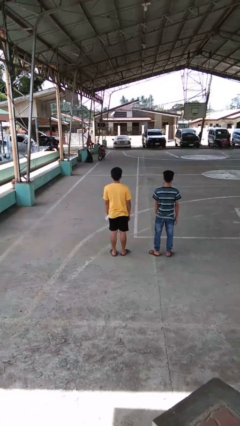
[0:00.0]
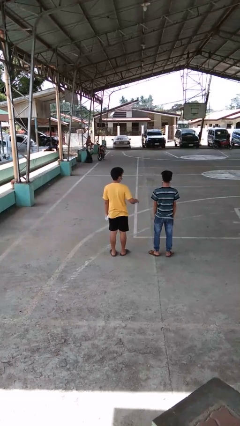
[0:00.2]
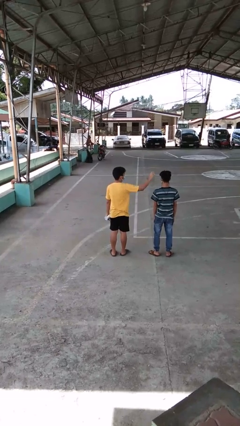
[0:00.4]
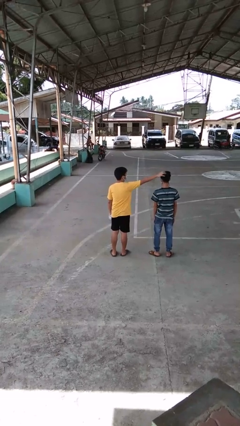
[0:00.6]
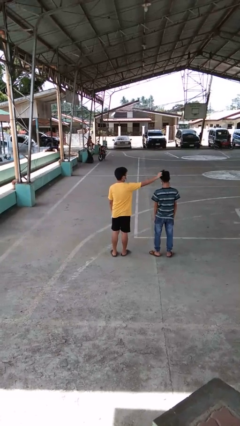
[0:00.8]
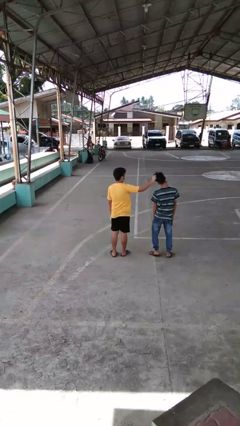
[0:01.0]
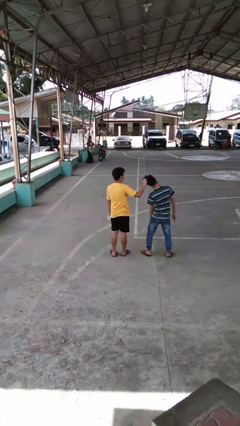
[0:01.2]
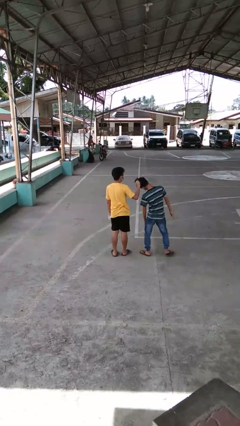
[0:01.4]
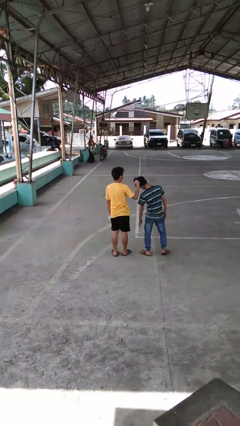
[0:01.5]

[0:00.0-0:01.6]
person grabs person by hair

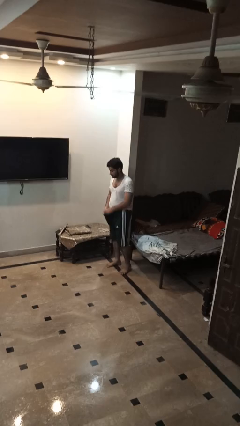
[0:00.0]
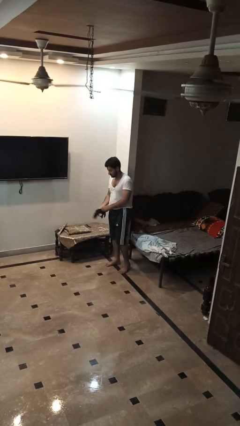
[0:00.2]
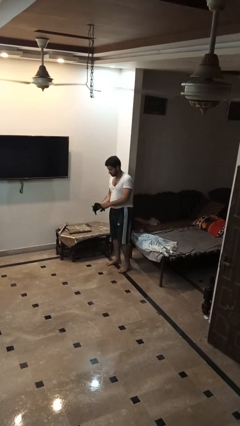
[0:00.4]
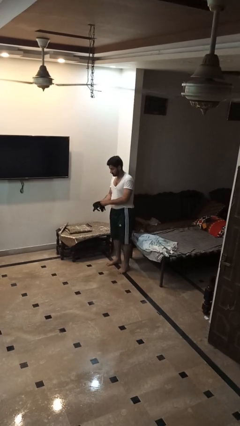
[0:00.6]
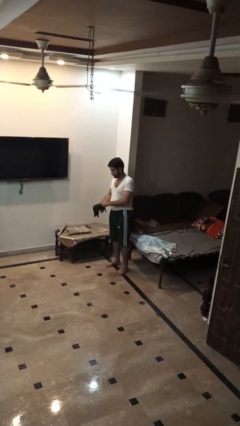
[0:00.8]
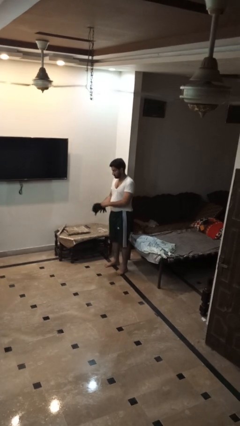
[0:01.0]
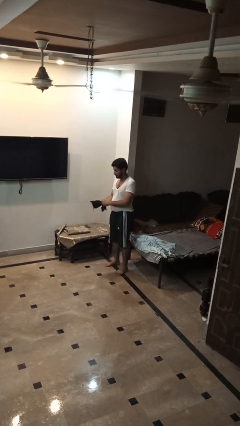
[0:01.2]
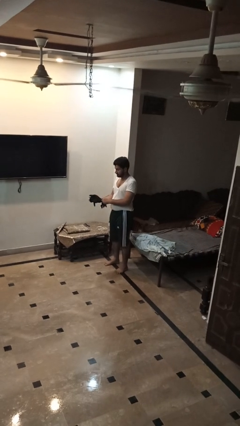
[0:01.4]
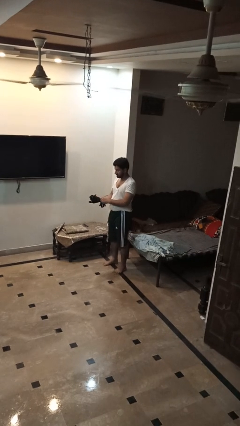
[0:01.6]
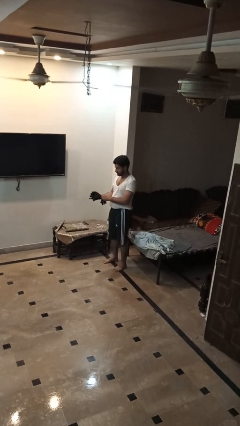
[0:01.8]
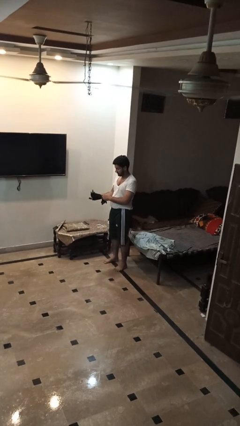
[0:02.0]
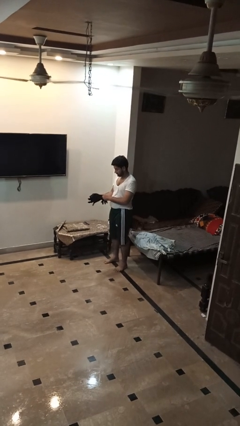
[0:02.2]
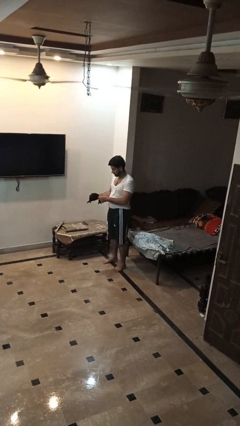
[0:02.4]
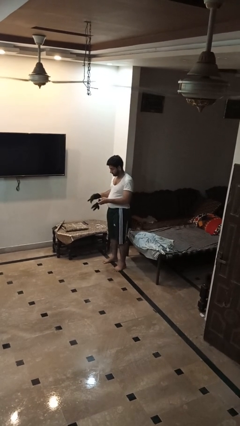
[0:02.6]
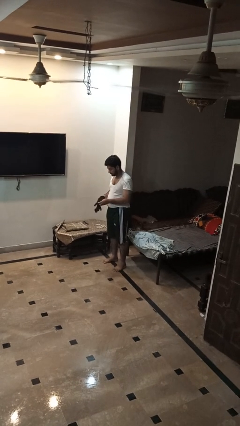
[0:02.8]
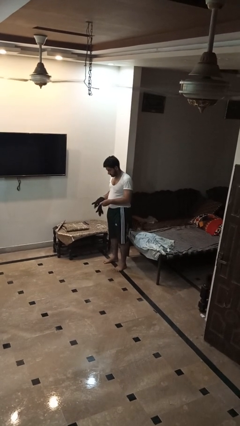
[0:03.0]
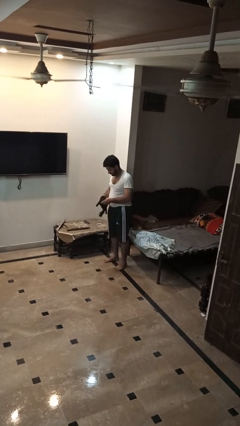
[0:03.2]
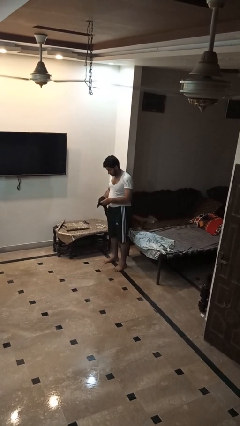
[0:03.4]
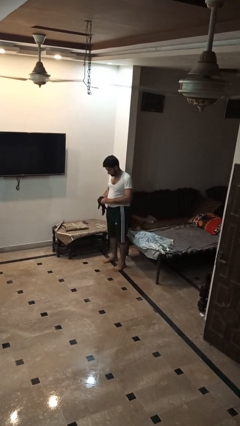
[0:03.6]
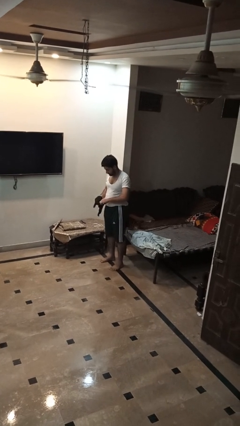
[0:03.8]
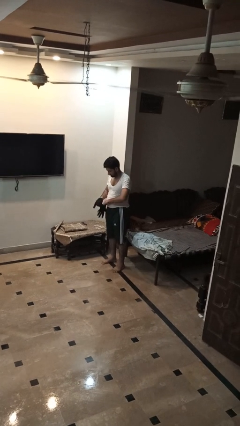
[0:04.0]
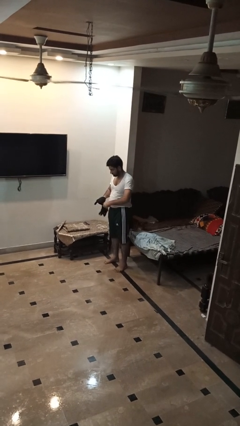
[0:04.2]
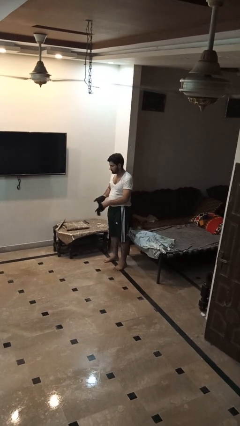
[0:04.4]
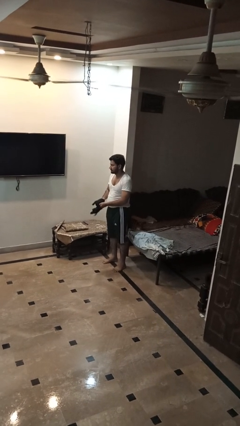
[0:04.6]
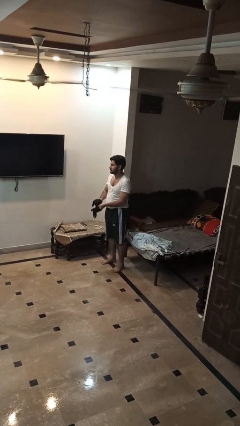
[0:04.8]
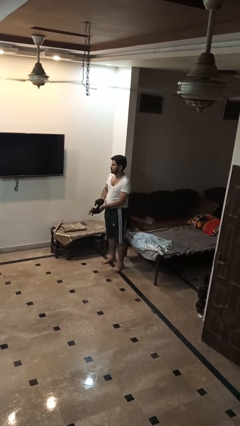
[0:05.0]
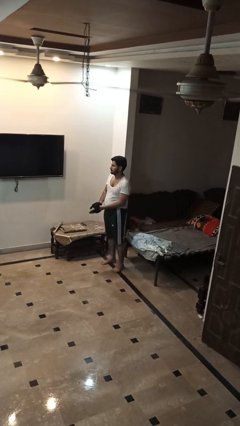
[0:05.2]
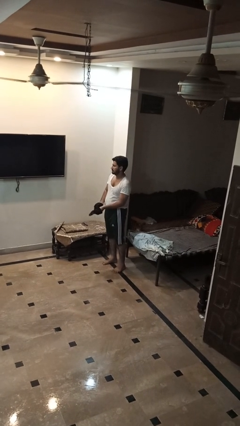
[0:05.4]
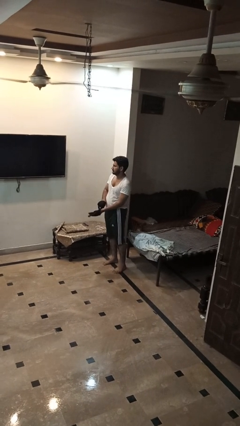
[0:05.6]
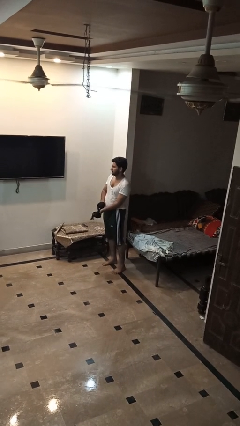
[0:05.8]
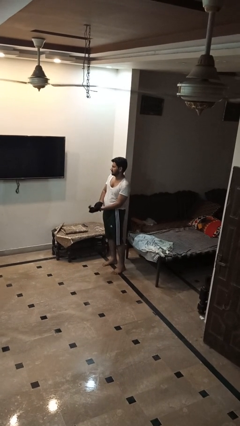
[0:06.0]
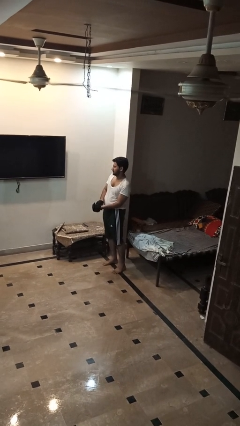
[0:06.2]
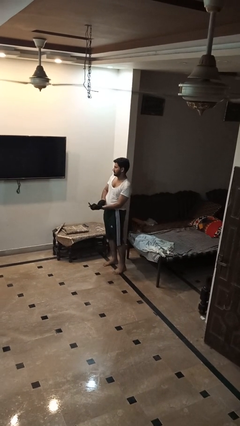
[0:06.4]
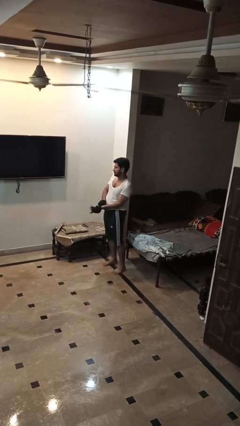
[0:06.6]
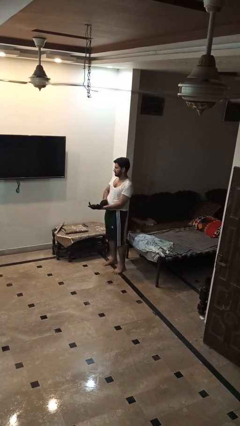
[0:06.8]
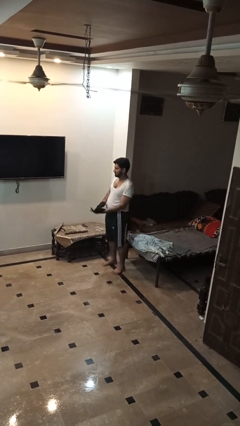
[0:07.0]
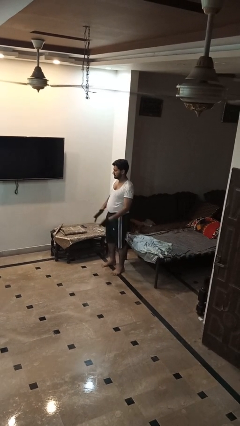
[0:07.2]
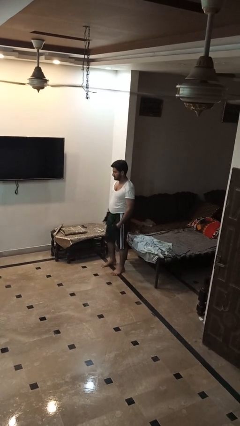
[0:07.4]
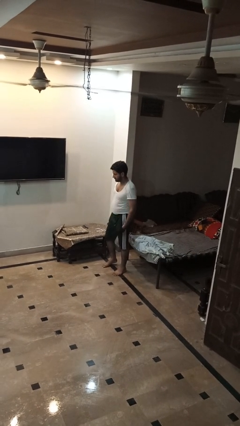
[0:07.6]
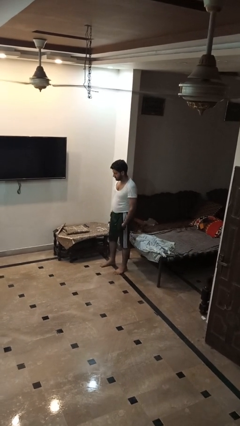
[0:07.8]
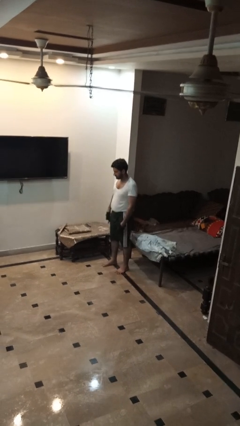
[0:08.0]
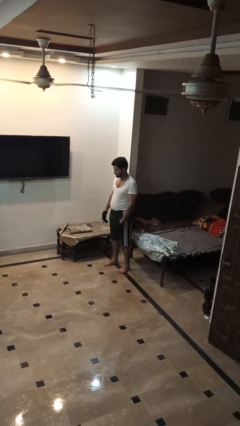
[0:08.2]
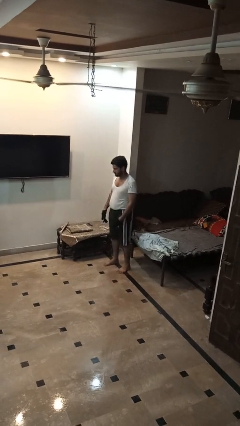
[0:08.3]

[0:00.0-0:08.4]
person puts on gloves

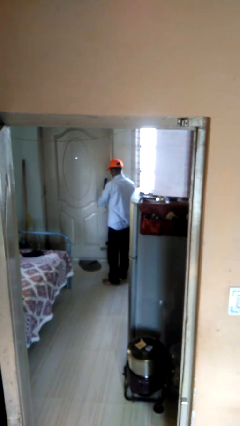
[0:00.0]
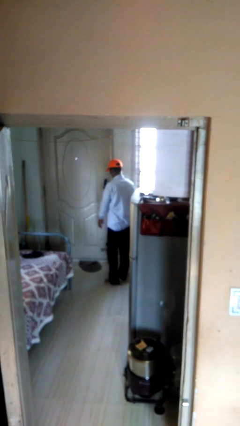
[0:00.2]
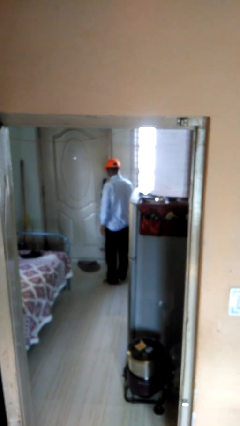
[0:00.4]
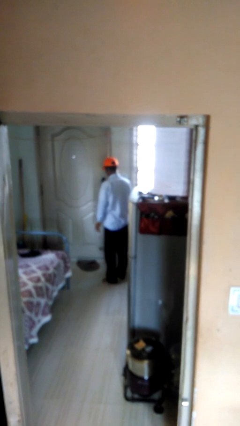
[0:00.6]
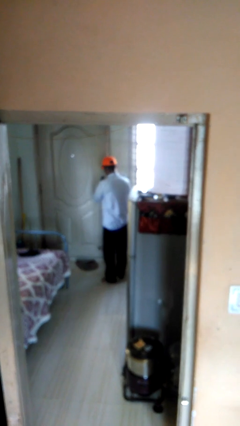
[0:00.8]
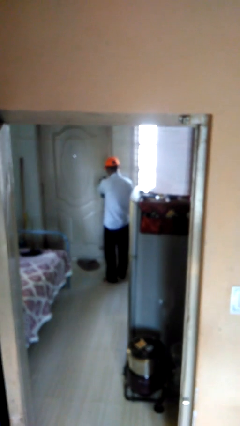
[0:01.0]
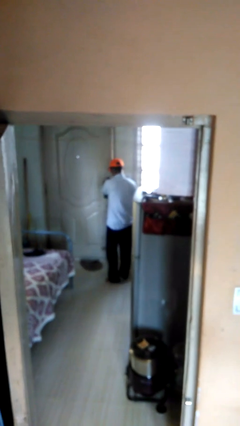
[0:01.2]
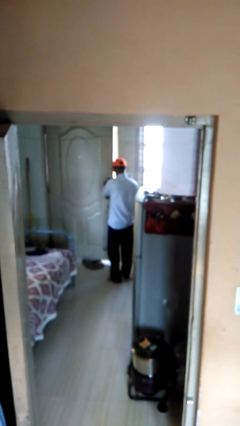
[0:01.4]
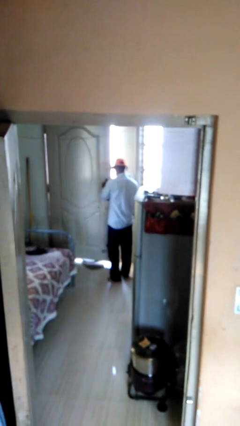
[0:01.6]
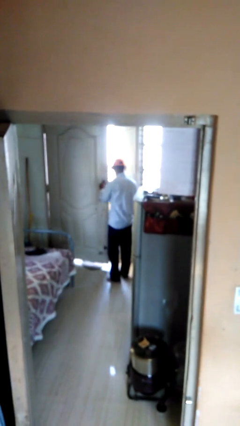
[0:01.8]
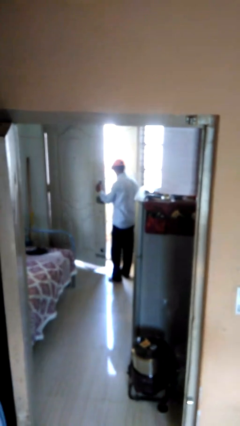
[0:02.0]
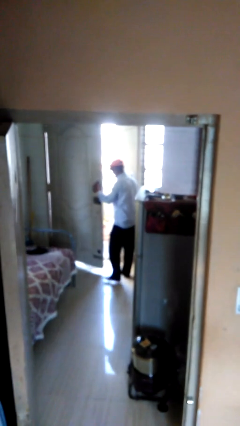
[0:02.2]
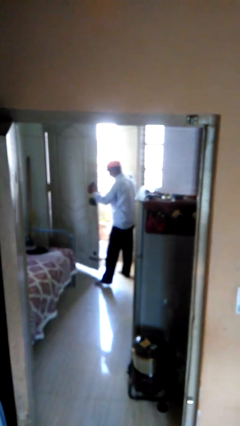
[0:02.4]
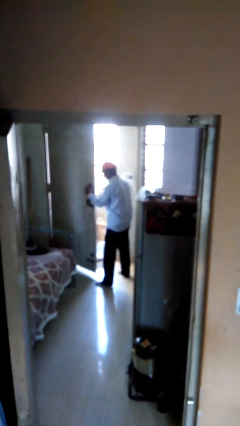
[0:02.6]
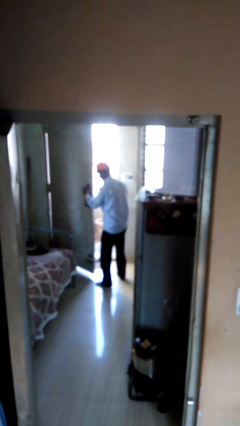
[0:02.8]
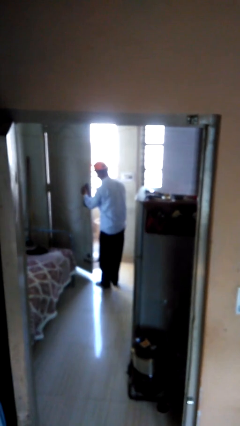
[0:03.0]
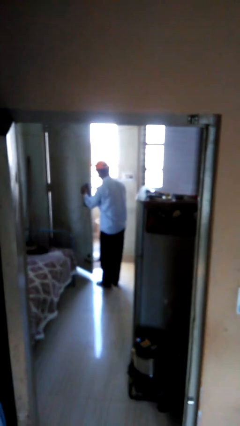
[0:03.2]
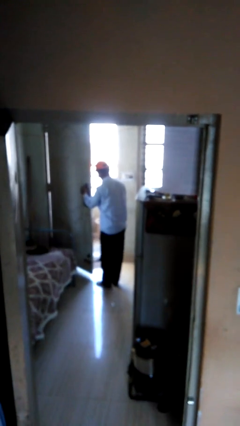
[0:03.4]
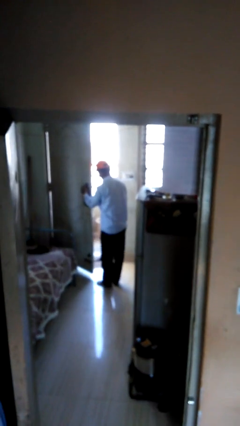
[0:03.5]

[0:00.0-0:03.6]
person opens facility door

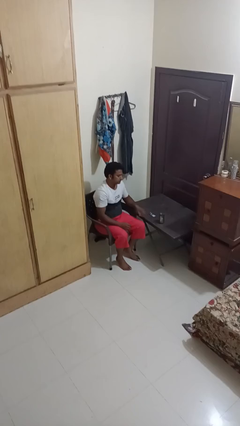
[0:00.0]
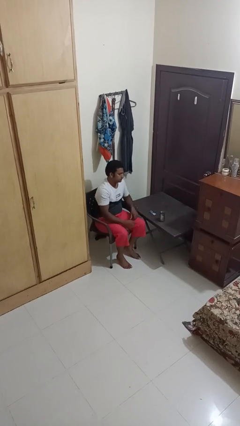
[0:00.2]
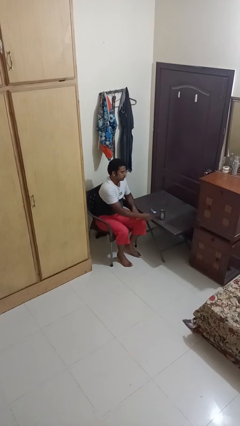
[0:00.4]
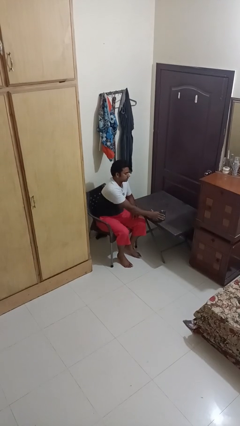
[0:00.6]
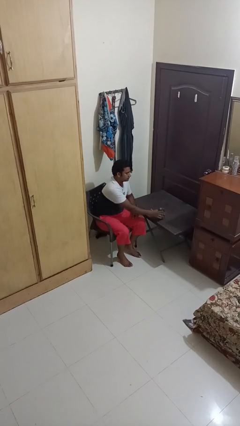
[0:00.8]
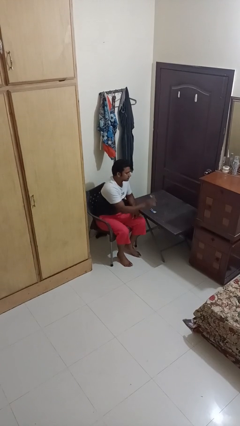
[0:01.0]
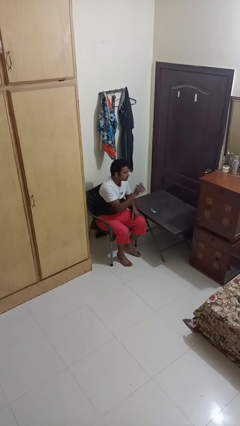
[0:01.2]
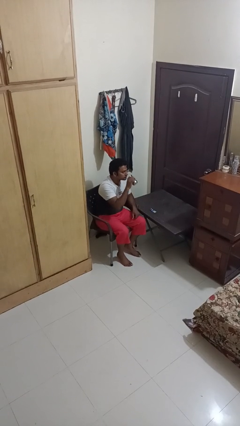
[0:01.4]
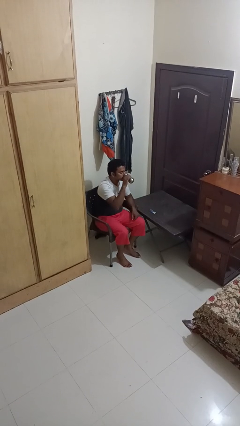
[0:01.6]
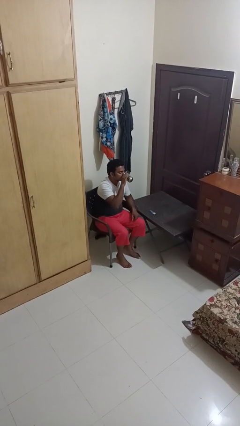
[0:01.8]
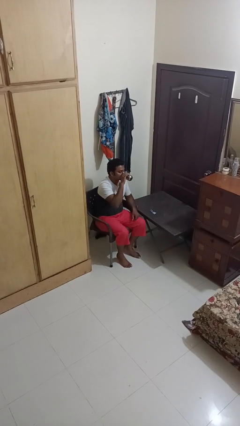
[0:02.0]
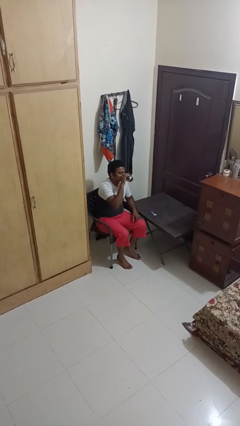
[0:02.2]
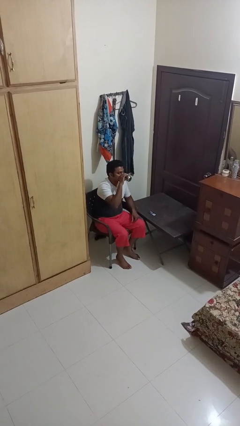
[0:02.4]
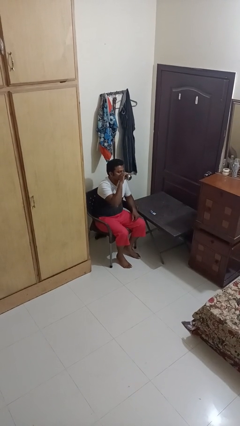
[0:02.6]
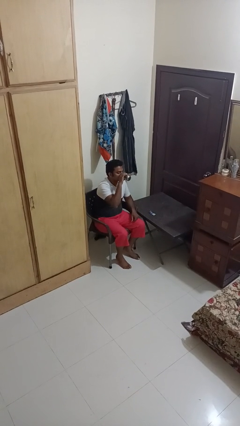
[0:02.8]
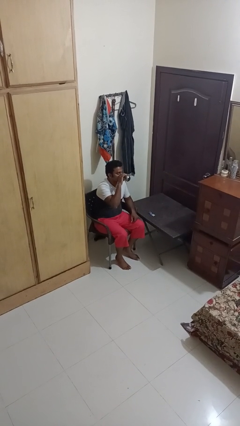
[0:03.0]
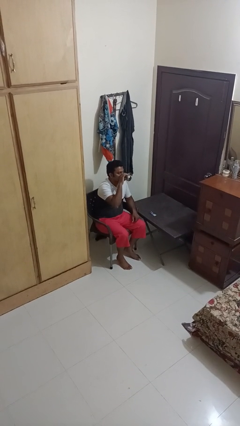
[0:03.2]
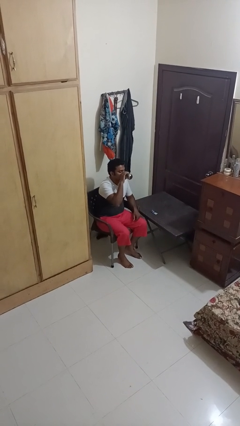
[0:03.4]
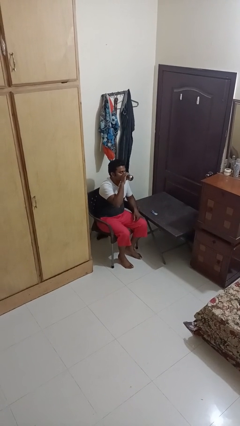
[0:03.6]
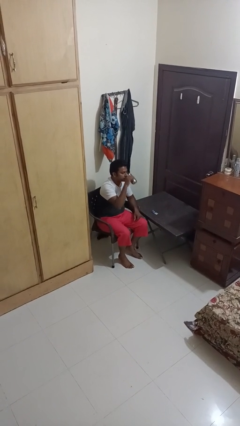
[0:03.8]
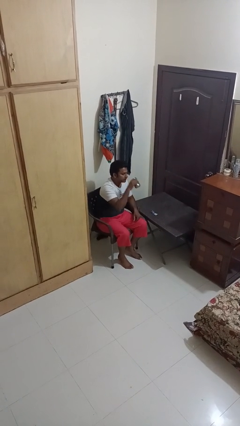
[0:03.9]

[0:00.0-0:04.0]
person drinks from cup
